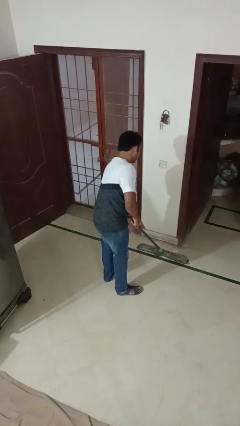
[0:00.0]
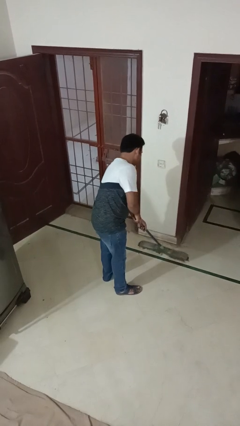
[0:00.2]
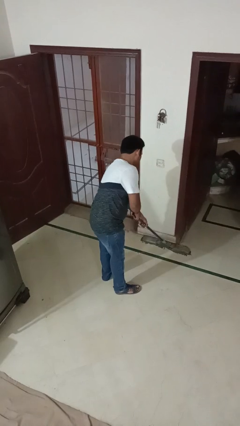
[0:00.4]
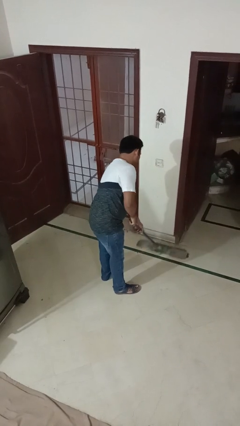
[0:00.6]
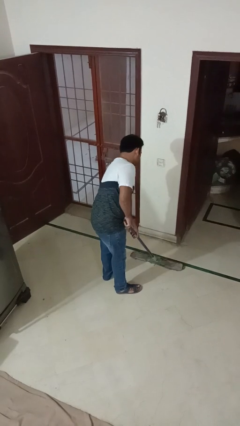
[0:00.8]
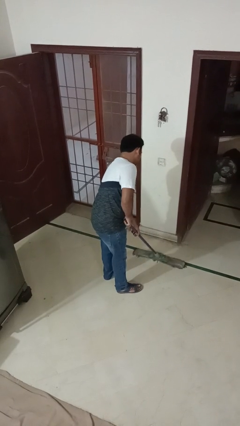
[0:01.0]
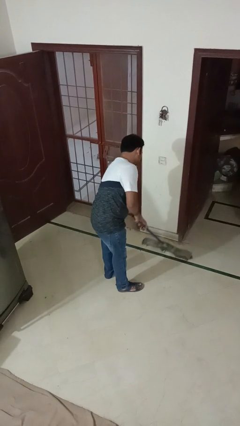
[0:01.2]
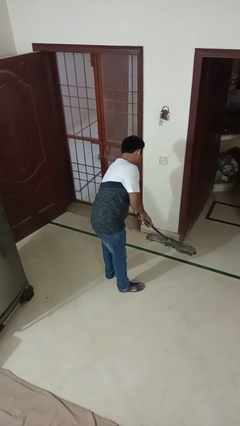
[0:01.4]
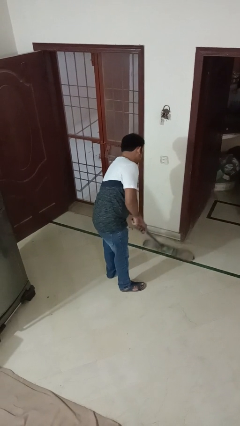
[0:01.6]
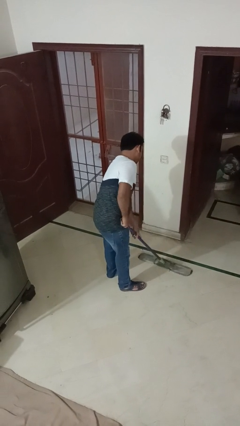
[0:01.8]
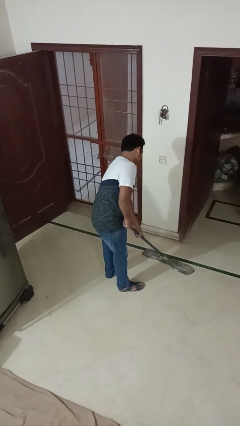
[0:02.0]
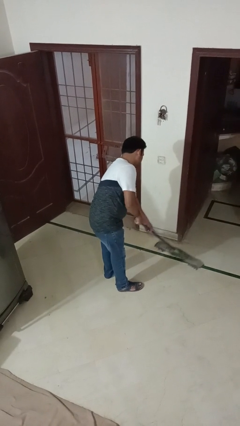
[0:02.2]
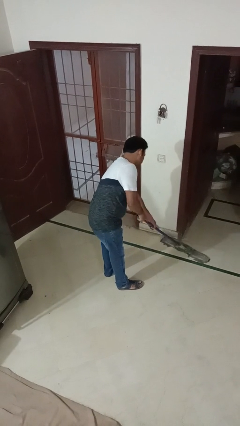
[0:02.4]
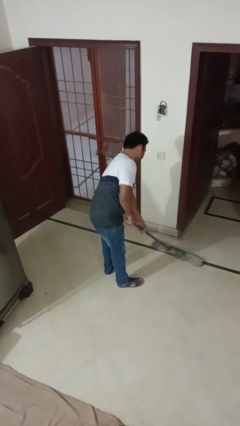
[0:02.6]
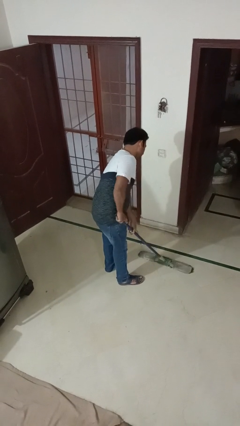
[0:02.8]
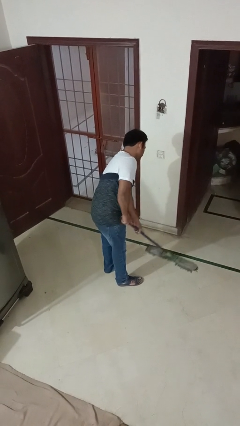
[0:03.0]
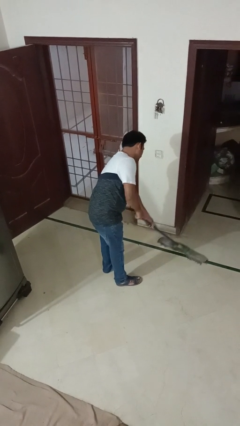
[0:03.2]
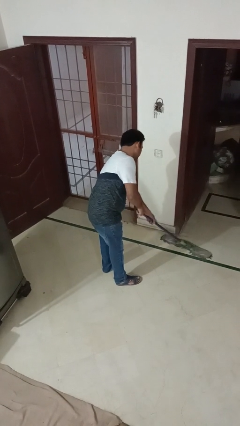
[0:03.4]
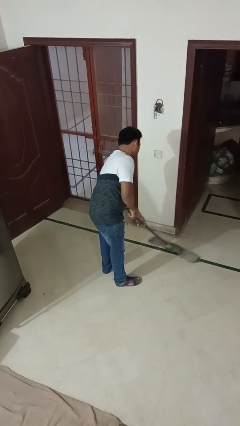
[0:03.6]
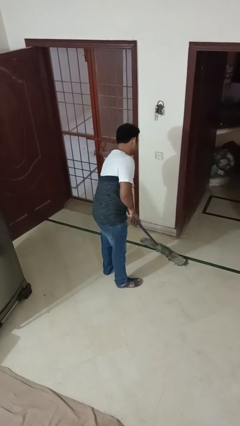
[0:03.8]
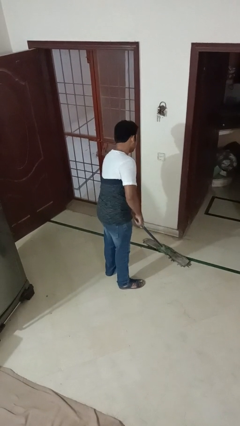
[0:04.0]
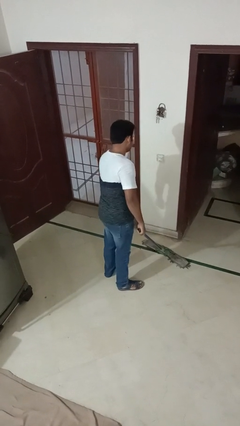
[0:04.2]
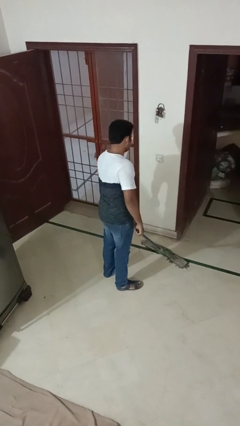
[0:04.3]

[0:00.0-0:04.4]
person mops

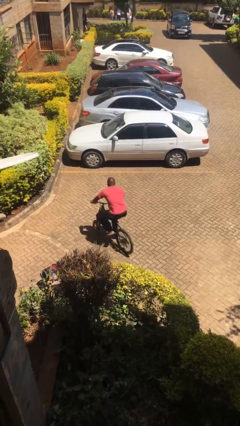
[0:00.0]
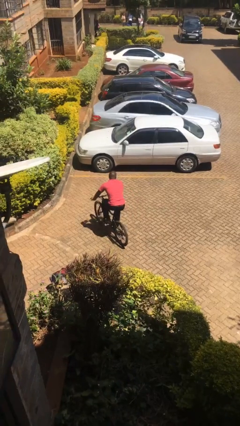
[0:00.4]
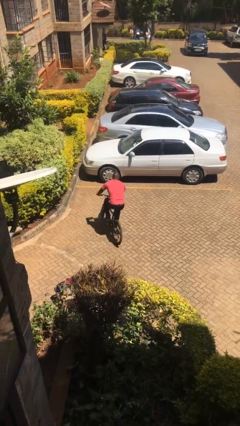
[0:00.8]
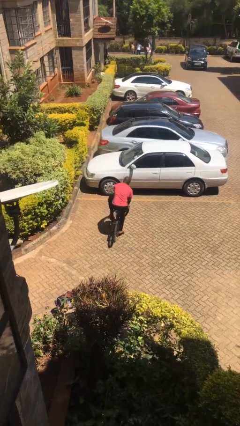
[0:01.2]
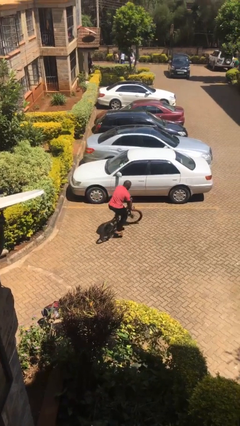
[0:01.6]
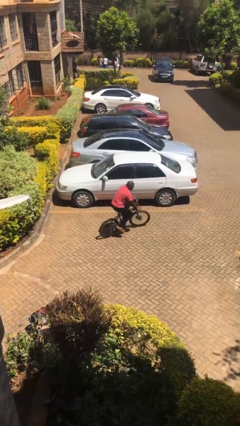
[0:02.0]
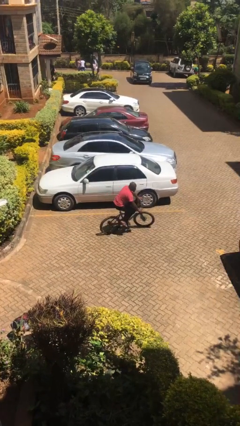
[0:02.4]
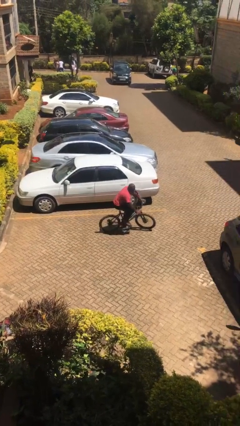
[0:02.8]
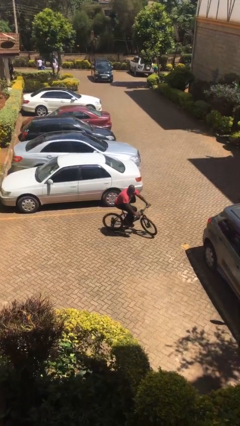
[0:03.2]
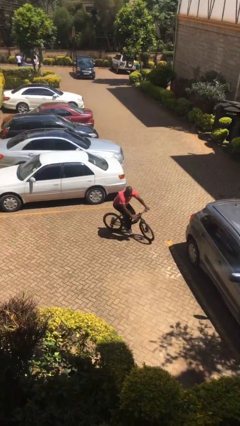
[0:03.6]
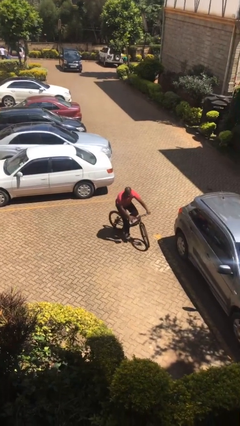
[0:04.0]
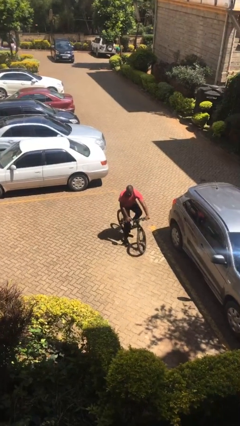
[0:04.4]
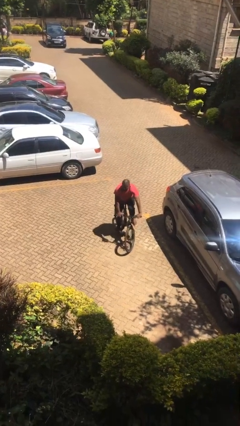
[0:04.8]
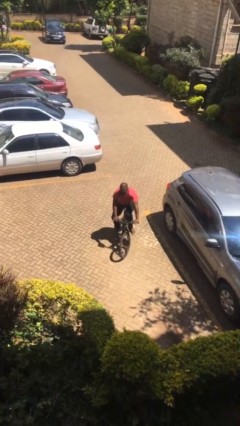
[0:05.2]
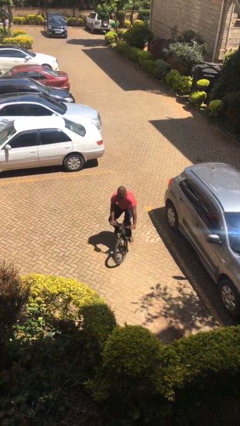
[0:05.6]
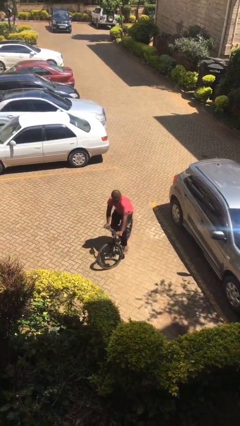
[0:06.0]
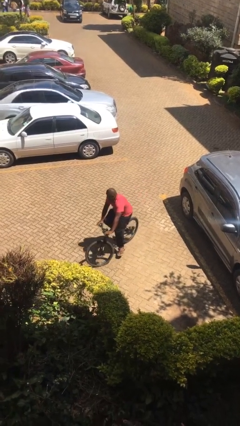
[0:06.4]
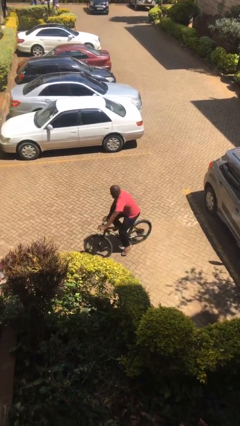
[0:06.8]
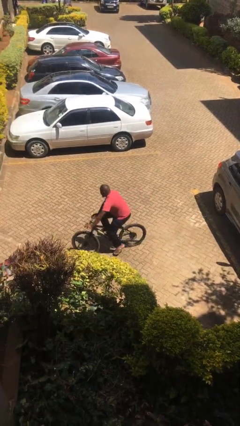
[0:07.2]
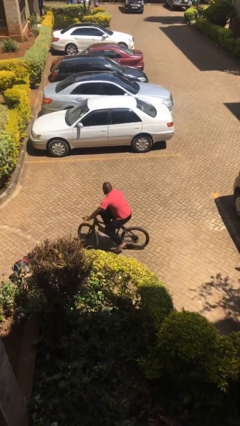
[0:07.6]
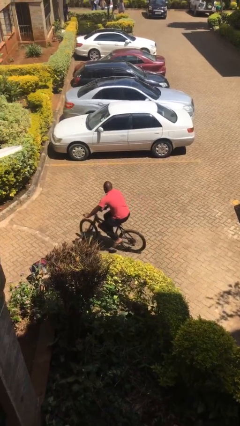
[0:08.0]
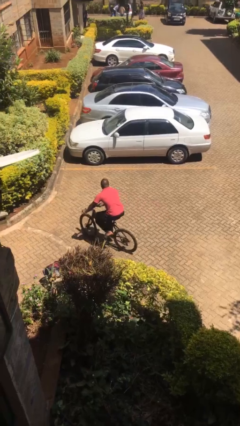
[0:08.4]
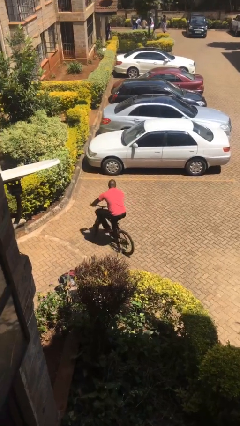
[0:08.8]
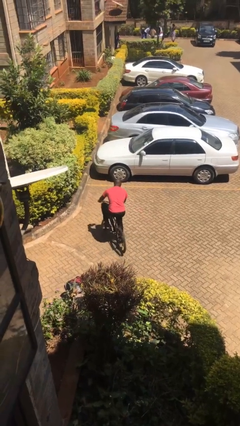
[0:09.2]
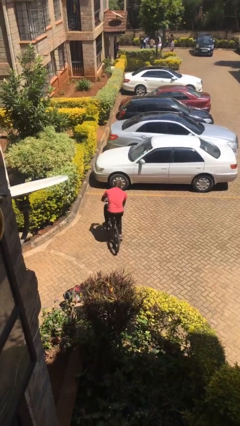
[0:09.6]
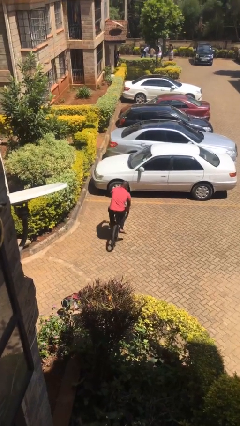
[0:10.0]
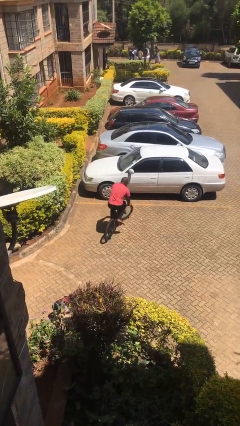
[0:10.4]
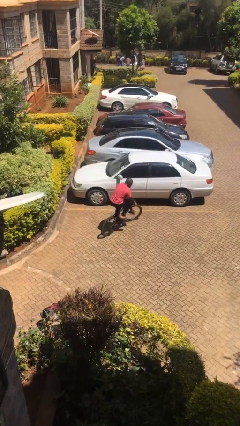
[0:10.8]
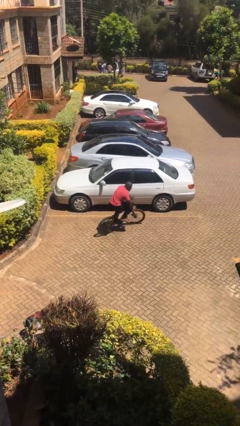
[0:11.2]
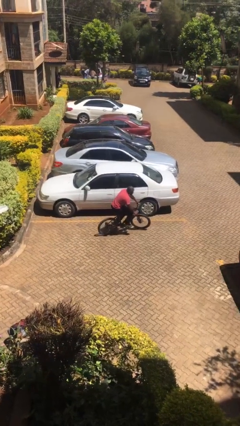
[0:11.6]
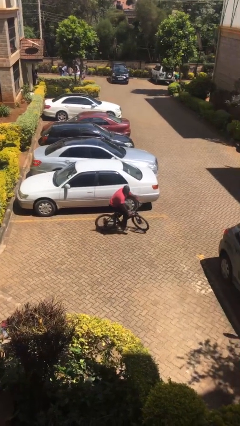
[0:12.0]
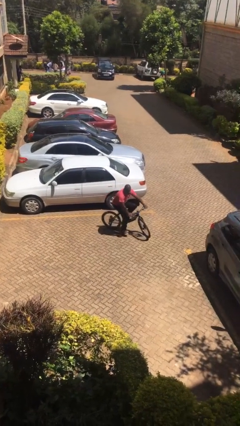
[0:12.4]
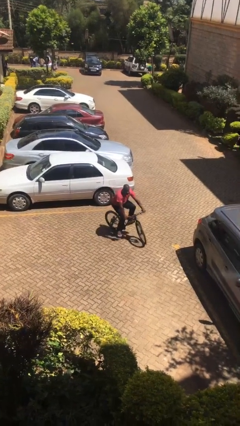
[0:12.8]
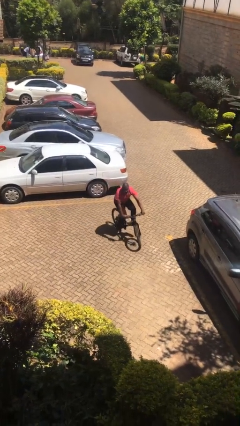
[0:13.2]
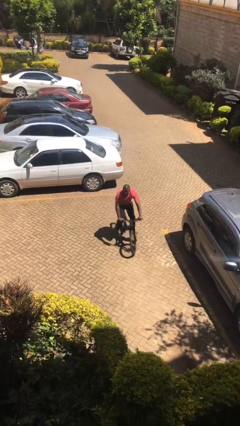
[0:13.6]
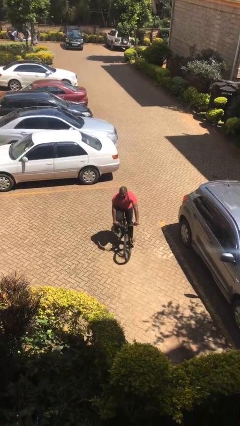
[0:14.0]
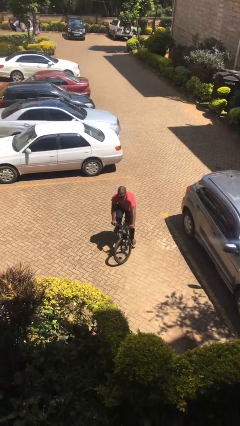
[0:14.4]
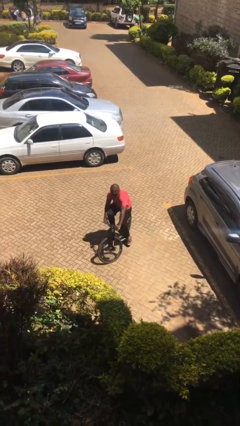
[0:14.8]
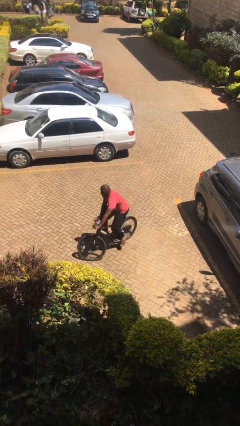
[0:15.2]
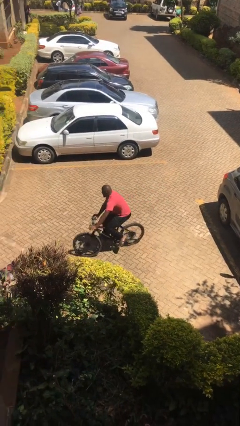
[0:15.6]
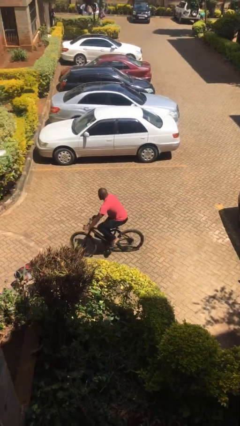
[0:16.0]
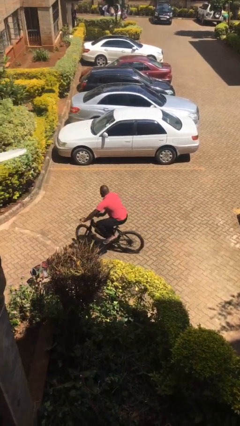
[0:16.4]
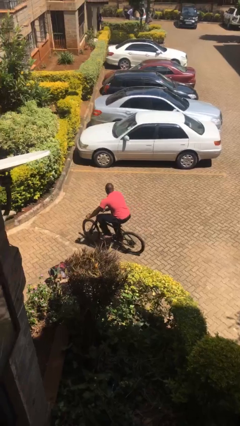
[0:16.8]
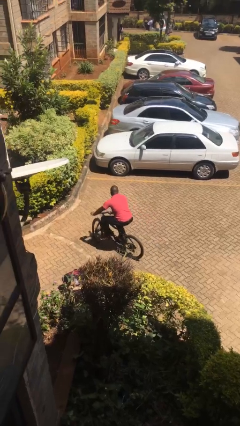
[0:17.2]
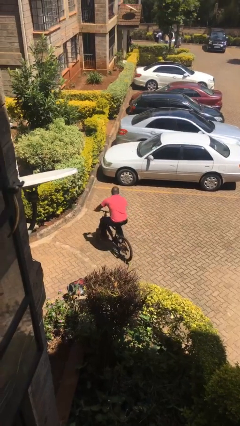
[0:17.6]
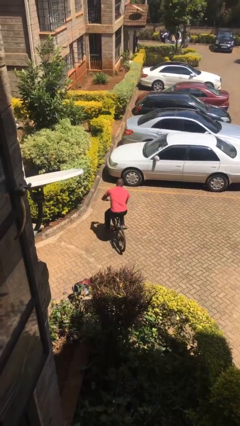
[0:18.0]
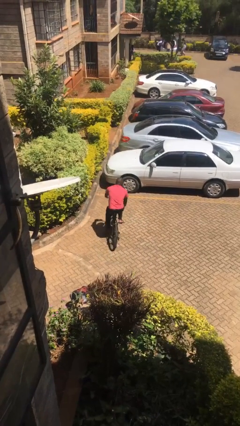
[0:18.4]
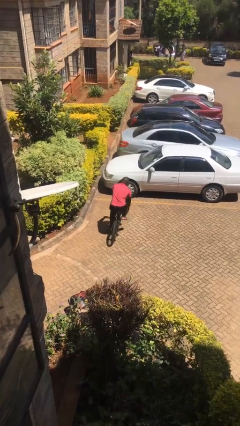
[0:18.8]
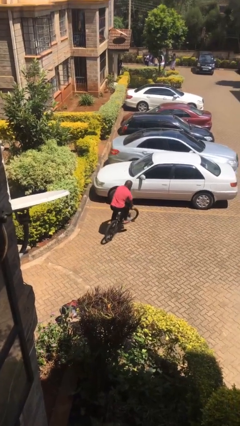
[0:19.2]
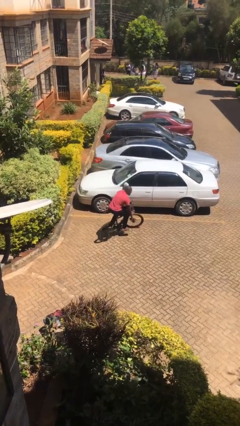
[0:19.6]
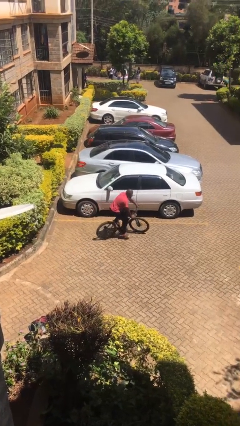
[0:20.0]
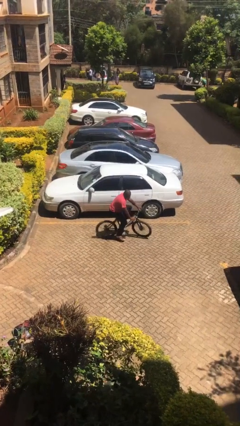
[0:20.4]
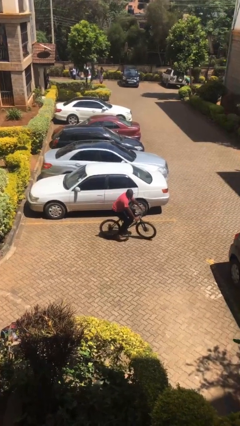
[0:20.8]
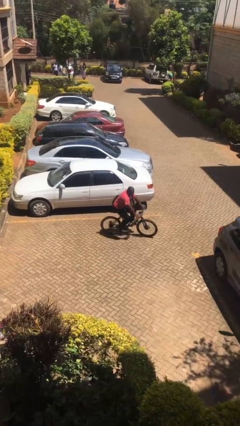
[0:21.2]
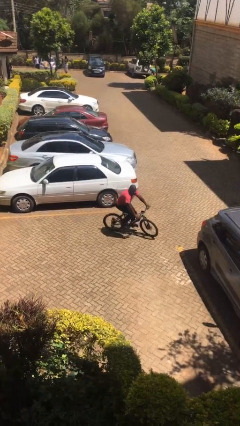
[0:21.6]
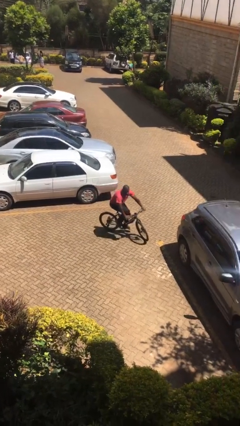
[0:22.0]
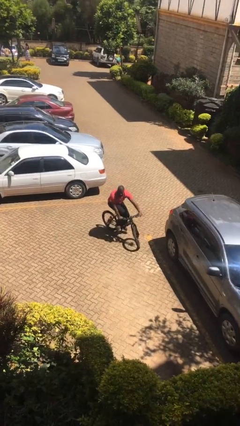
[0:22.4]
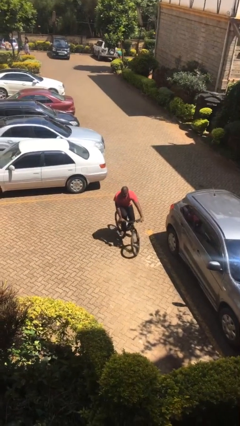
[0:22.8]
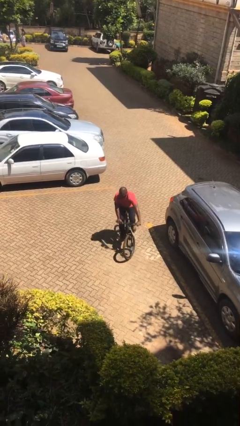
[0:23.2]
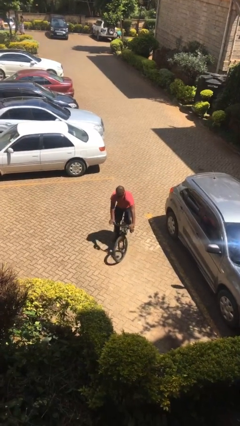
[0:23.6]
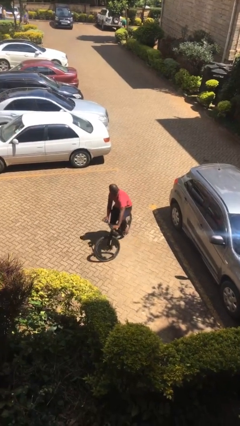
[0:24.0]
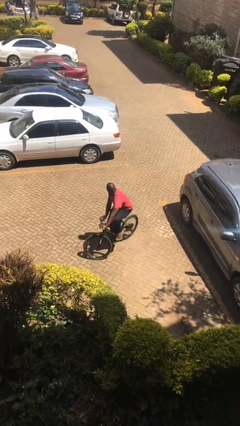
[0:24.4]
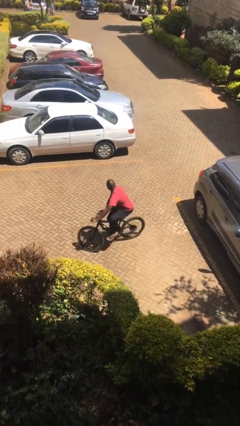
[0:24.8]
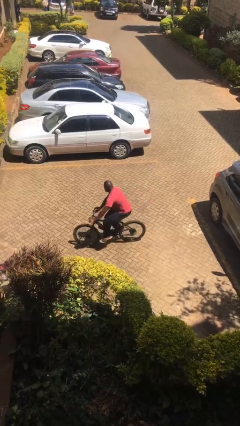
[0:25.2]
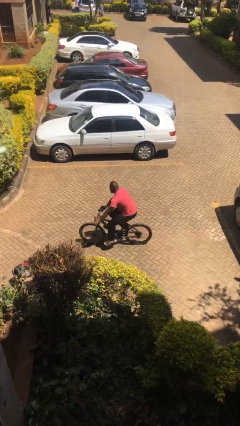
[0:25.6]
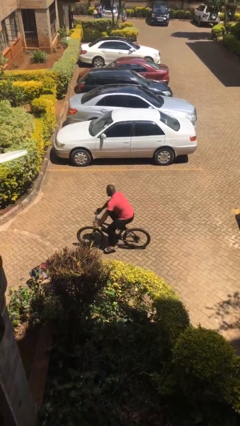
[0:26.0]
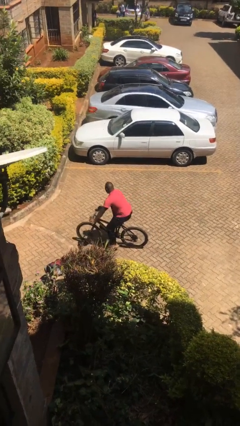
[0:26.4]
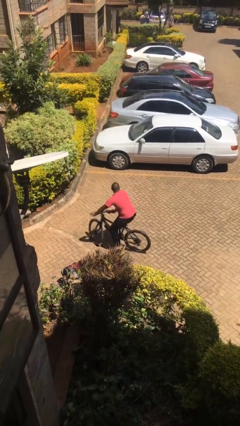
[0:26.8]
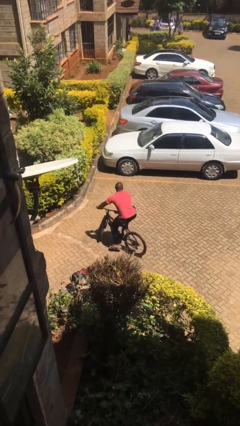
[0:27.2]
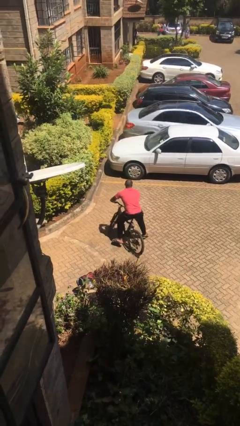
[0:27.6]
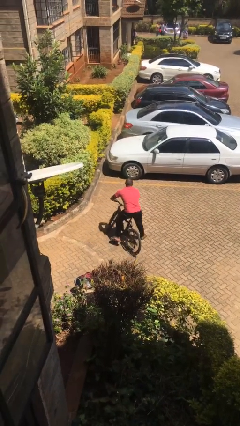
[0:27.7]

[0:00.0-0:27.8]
person rides bicycle
